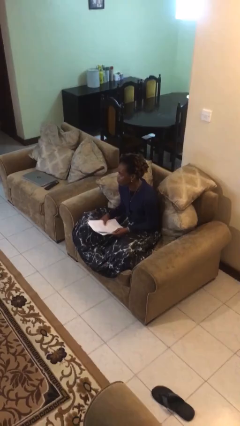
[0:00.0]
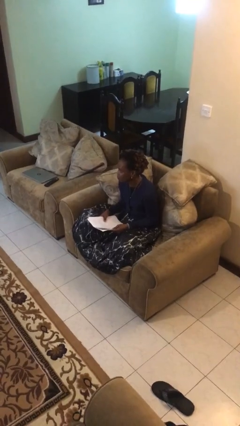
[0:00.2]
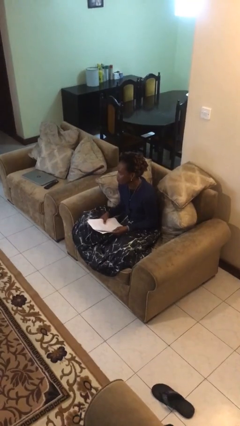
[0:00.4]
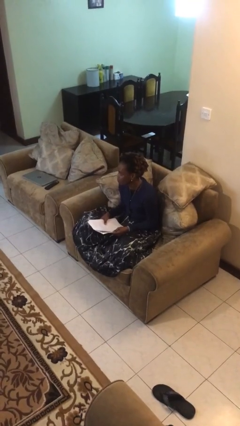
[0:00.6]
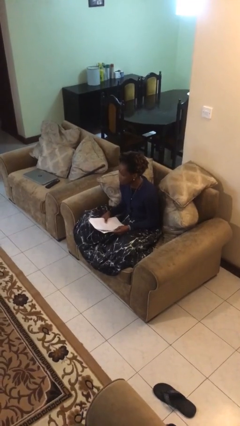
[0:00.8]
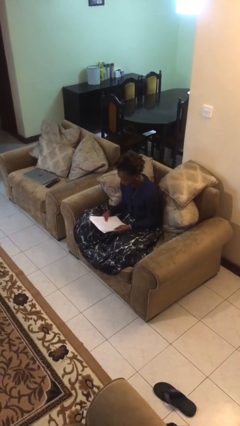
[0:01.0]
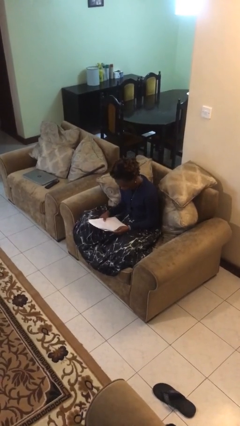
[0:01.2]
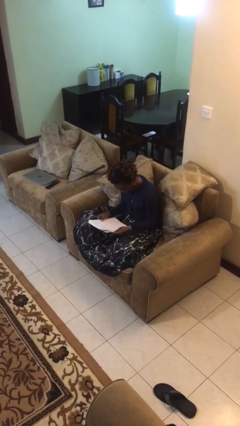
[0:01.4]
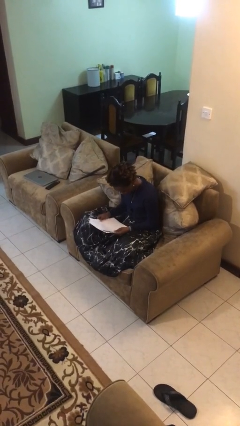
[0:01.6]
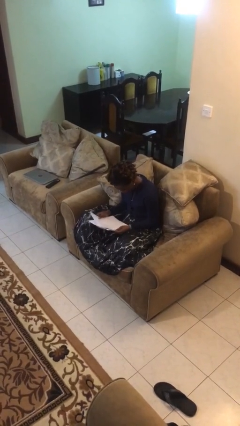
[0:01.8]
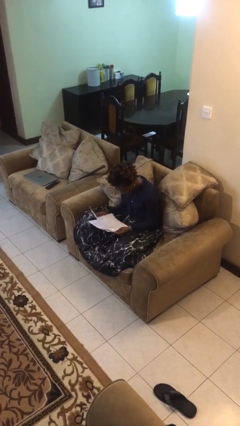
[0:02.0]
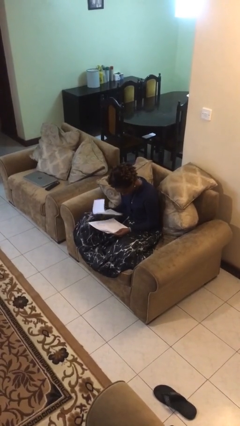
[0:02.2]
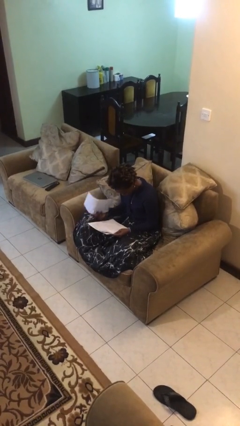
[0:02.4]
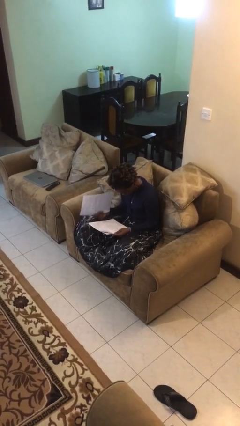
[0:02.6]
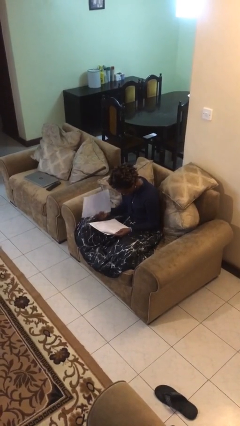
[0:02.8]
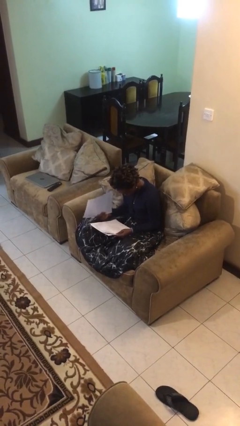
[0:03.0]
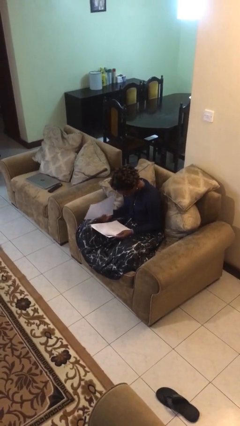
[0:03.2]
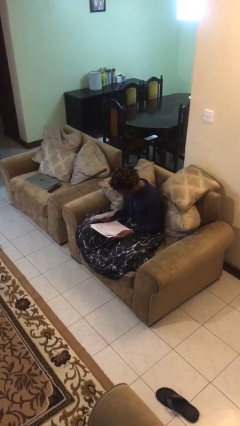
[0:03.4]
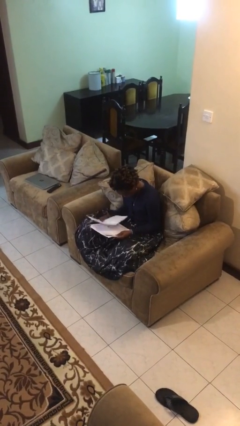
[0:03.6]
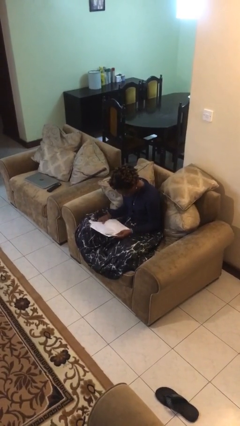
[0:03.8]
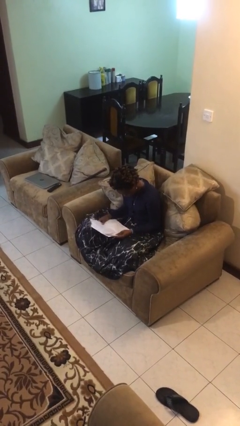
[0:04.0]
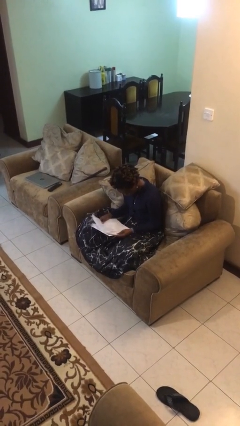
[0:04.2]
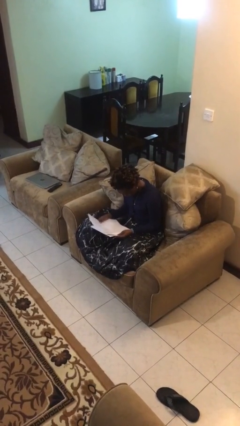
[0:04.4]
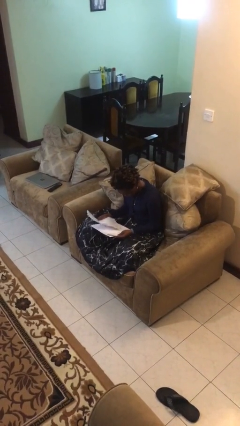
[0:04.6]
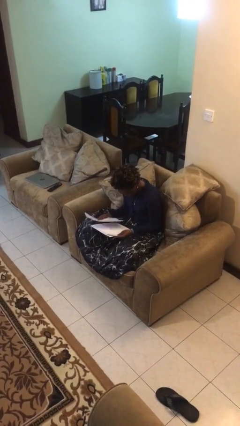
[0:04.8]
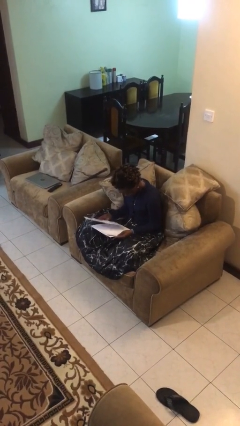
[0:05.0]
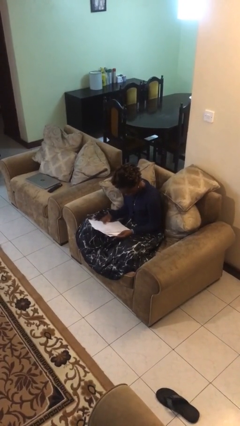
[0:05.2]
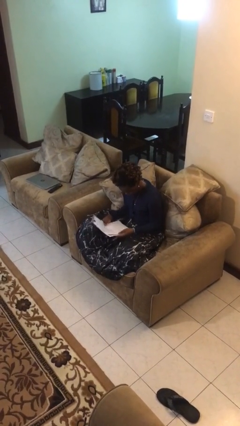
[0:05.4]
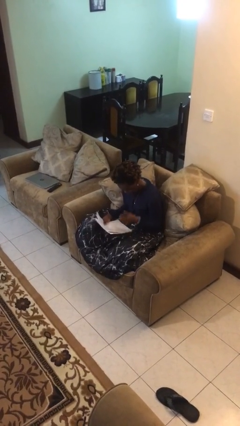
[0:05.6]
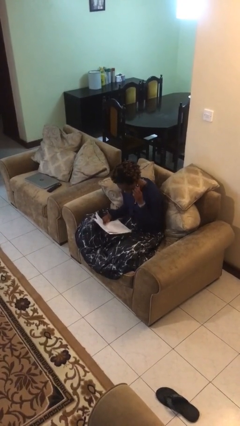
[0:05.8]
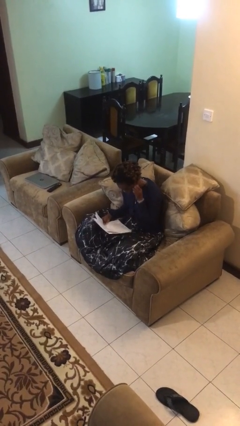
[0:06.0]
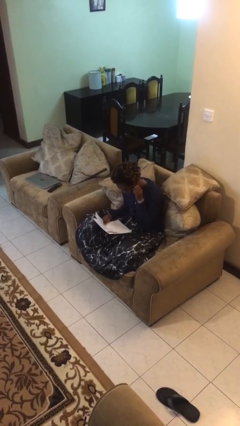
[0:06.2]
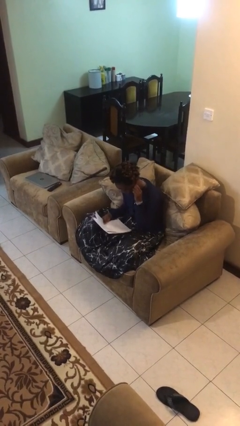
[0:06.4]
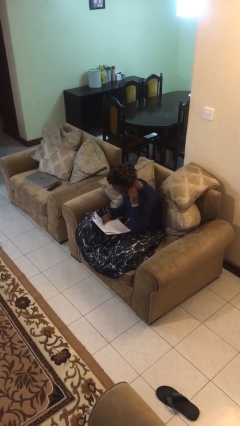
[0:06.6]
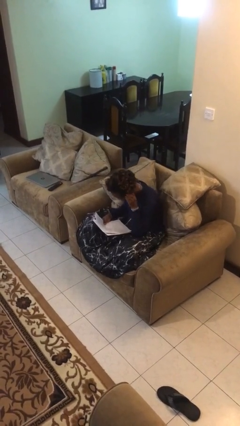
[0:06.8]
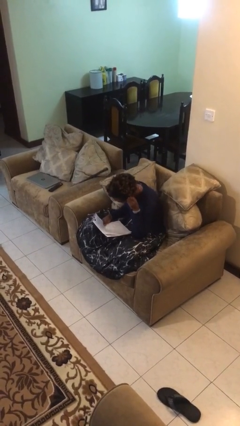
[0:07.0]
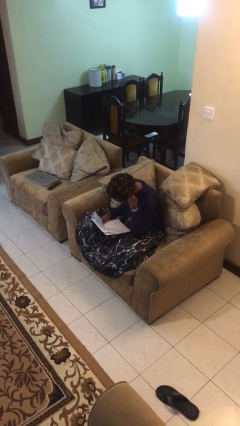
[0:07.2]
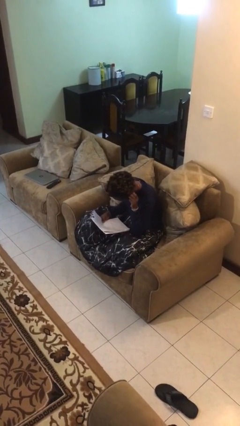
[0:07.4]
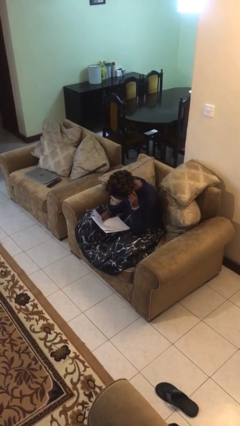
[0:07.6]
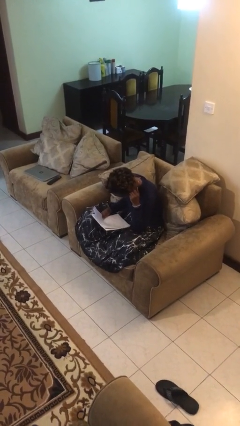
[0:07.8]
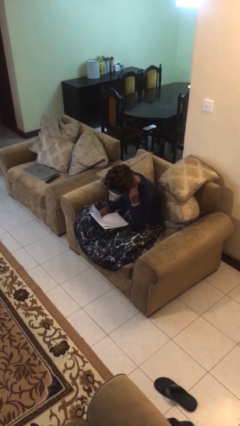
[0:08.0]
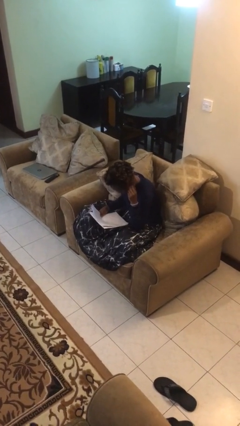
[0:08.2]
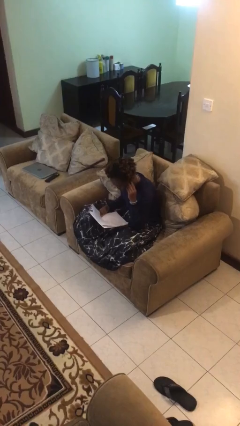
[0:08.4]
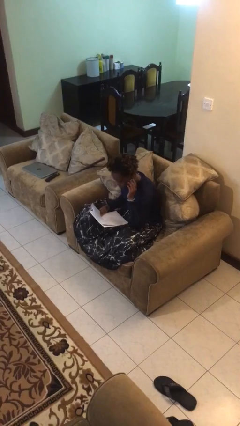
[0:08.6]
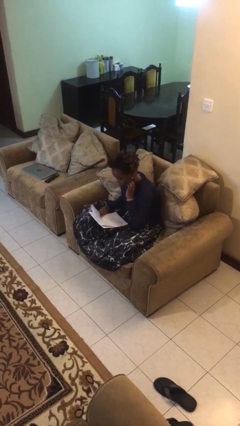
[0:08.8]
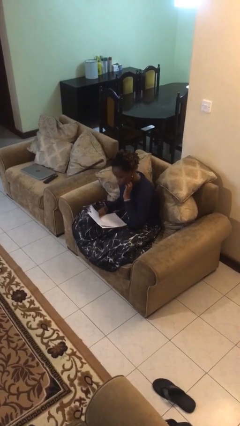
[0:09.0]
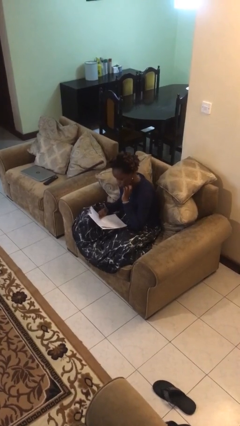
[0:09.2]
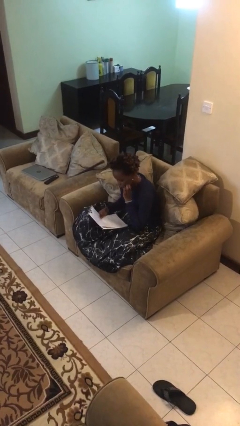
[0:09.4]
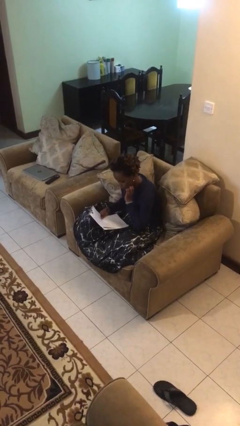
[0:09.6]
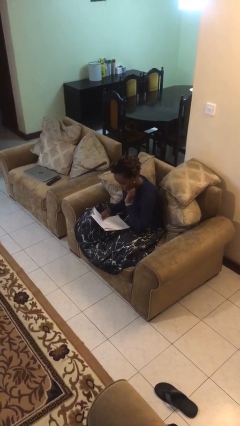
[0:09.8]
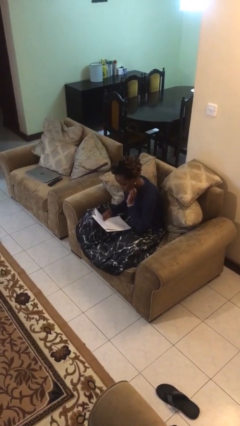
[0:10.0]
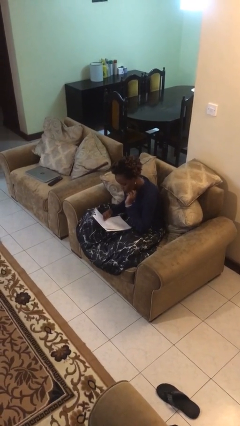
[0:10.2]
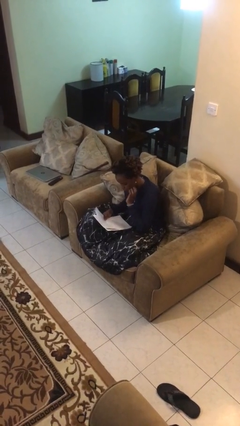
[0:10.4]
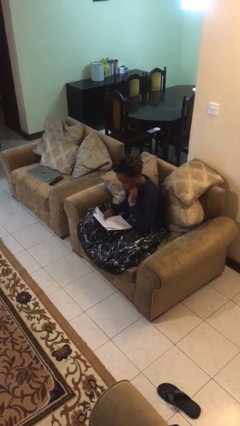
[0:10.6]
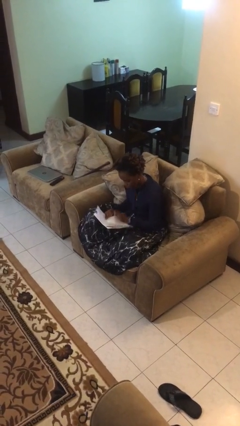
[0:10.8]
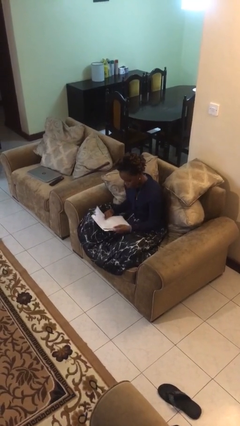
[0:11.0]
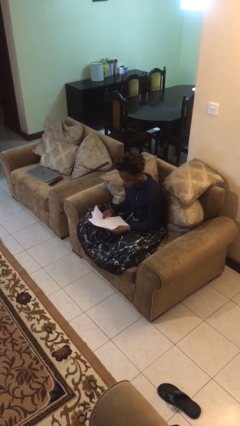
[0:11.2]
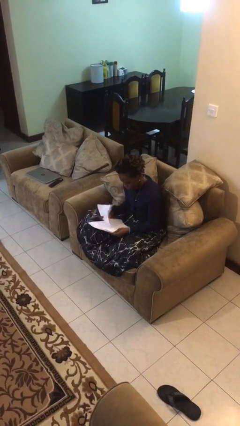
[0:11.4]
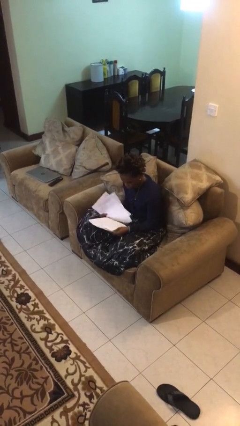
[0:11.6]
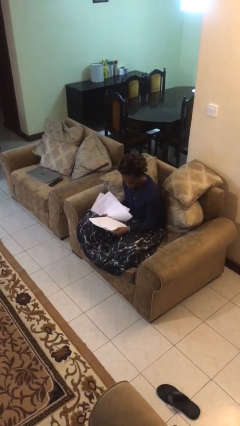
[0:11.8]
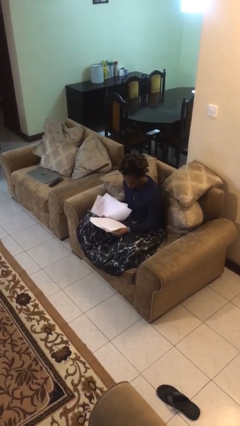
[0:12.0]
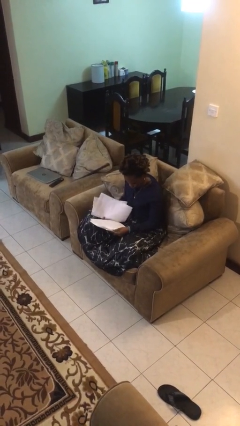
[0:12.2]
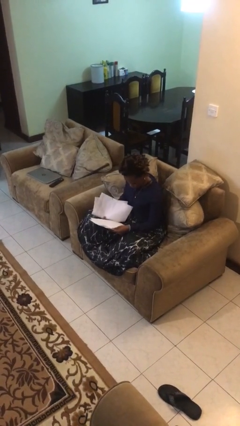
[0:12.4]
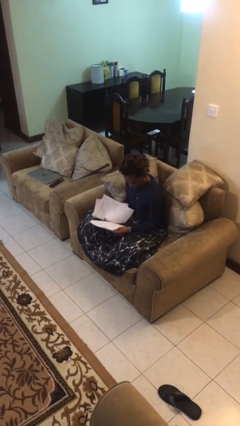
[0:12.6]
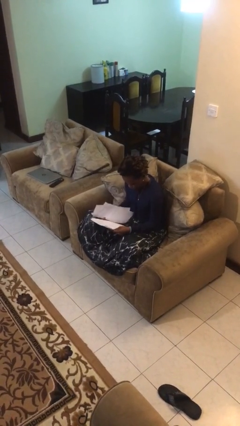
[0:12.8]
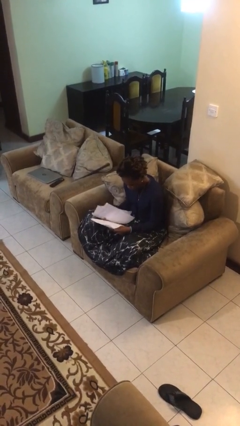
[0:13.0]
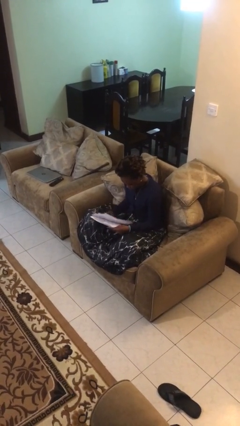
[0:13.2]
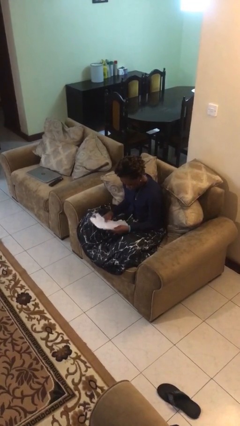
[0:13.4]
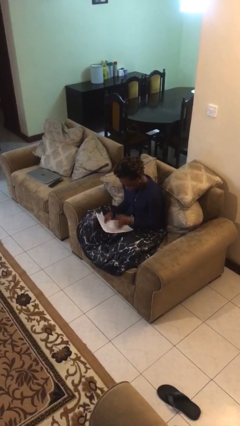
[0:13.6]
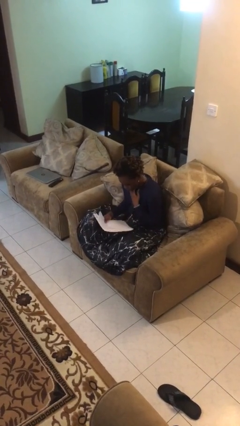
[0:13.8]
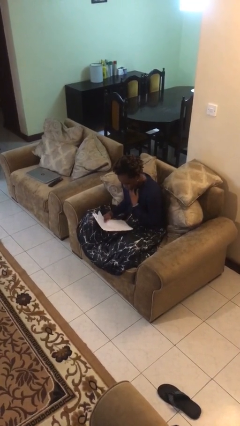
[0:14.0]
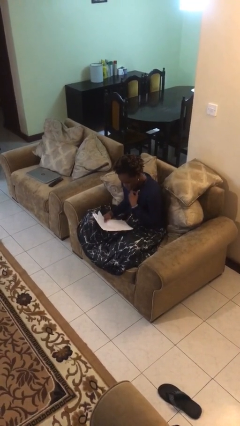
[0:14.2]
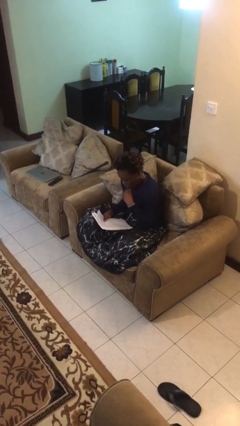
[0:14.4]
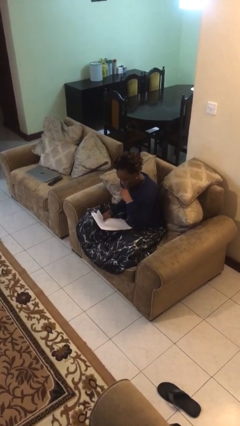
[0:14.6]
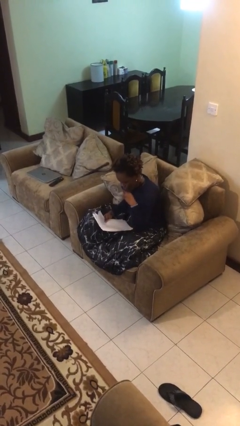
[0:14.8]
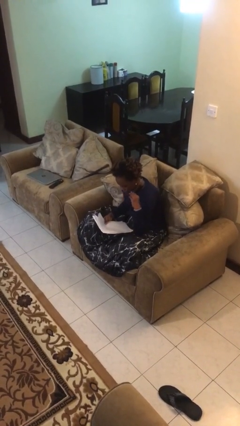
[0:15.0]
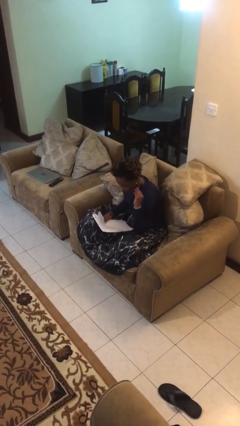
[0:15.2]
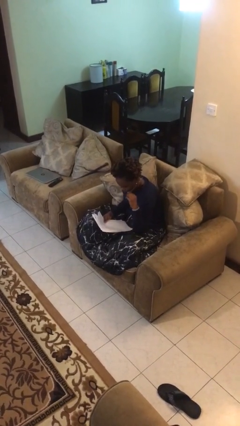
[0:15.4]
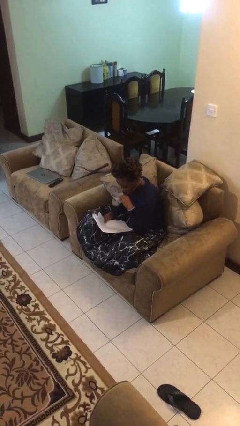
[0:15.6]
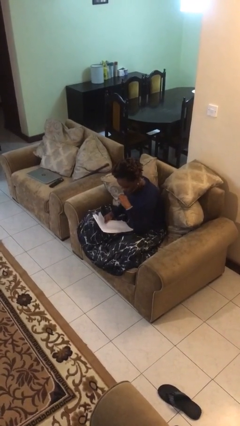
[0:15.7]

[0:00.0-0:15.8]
person reads document

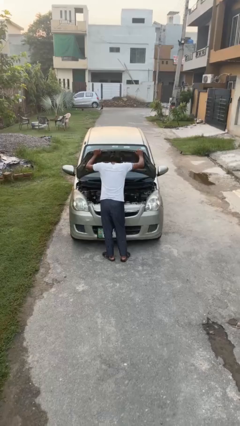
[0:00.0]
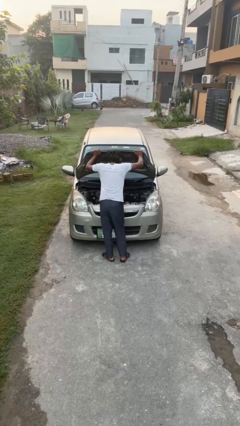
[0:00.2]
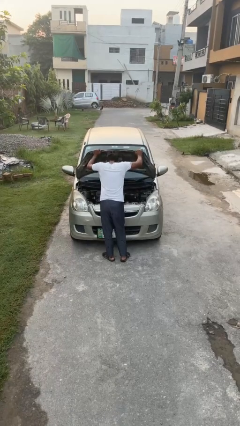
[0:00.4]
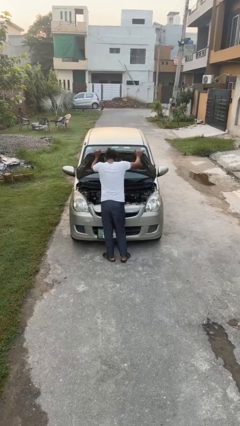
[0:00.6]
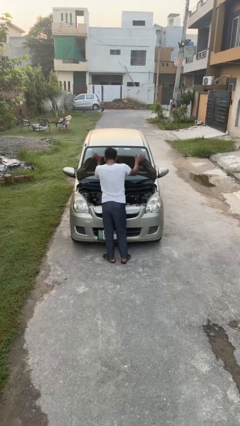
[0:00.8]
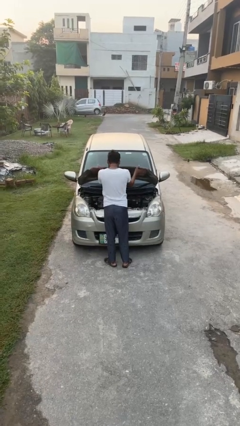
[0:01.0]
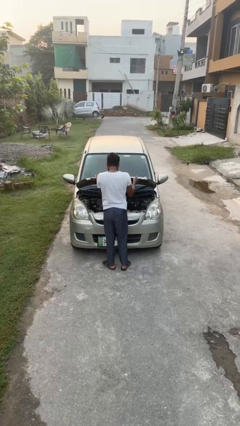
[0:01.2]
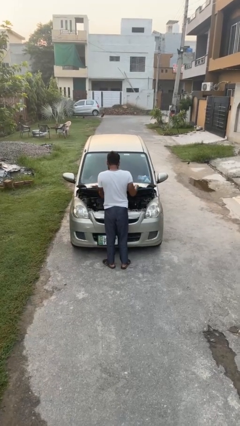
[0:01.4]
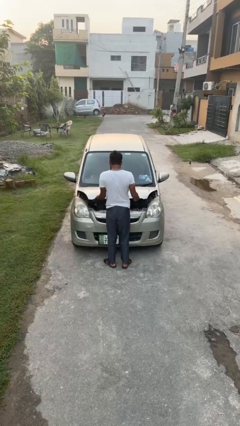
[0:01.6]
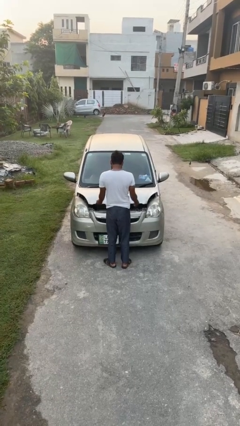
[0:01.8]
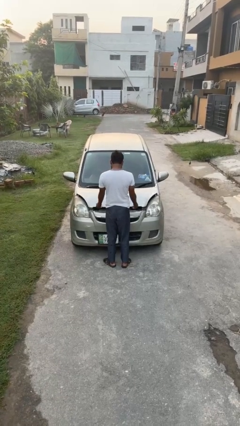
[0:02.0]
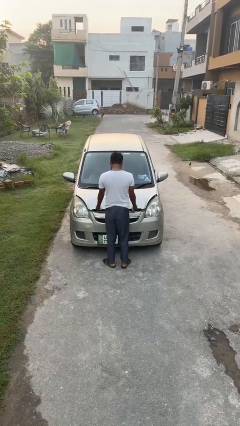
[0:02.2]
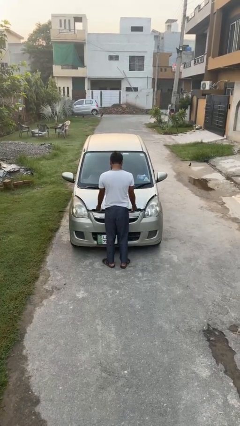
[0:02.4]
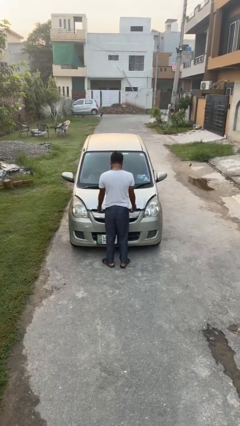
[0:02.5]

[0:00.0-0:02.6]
person closes car hood
